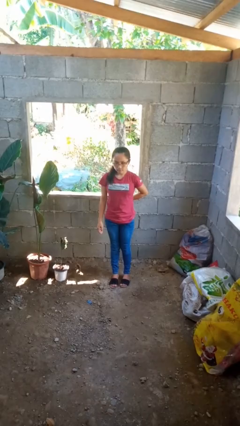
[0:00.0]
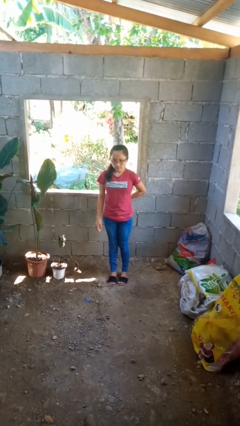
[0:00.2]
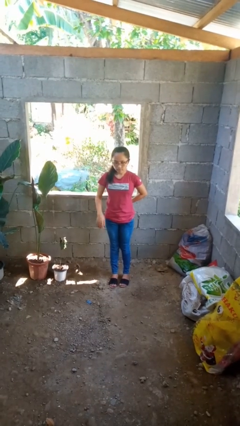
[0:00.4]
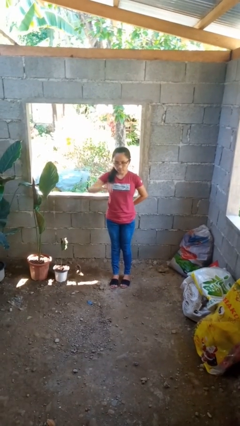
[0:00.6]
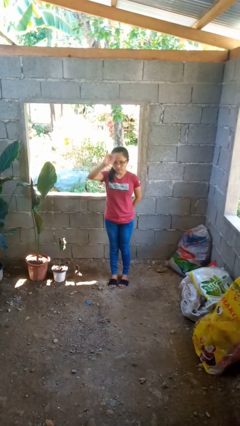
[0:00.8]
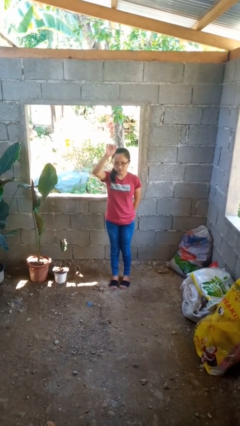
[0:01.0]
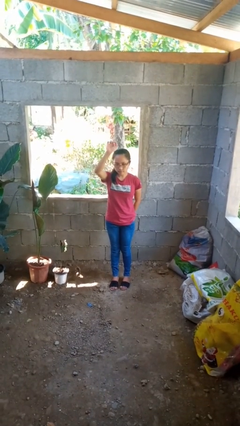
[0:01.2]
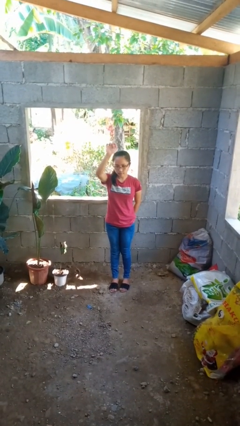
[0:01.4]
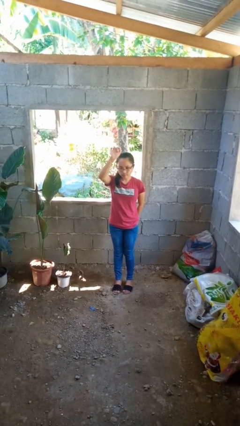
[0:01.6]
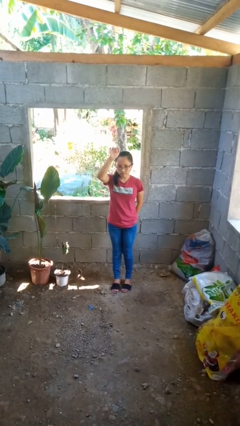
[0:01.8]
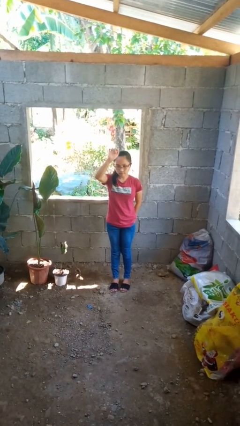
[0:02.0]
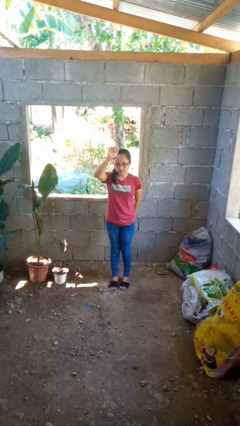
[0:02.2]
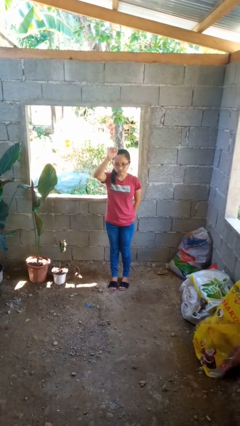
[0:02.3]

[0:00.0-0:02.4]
person gestures raise hand

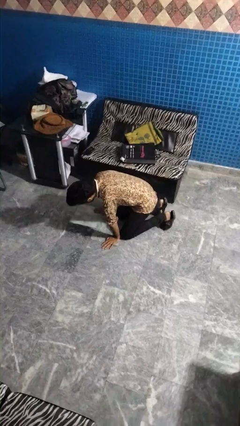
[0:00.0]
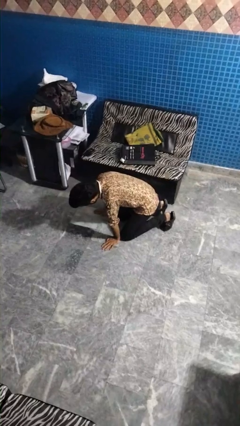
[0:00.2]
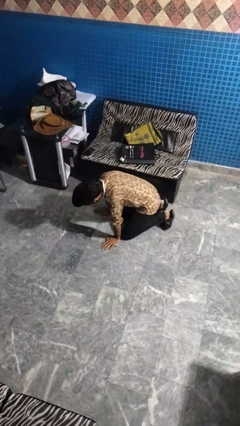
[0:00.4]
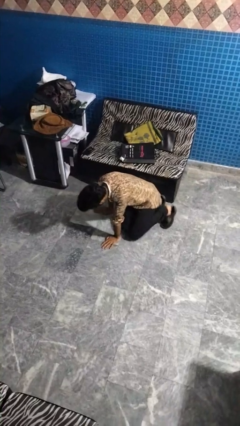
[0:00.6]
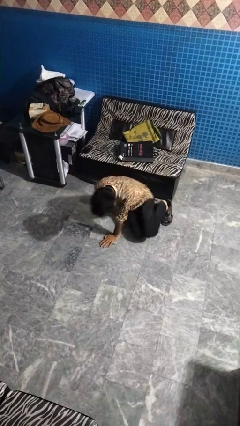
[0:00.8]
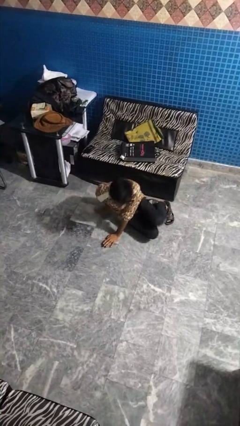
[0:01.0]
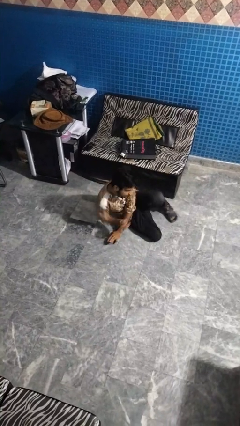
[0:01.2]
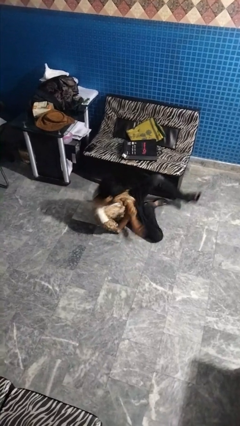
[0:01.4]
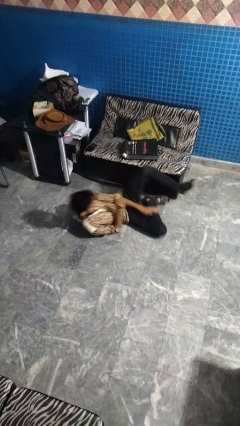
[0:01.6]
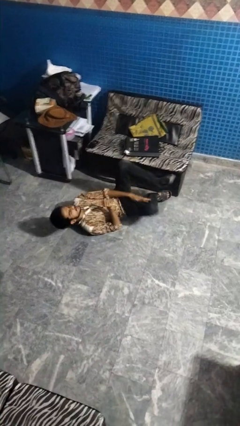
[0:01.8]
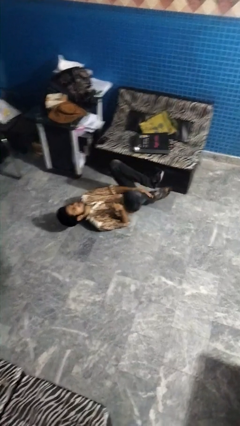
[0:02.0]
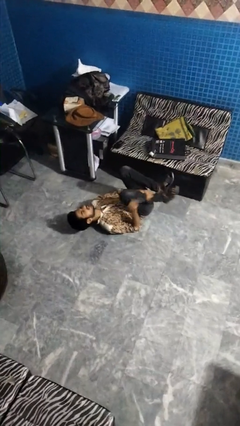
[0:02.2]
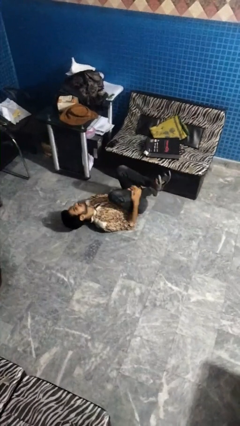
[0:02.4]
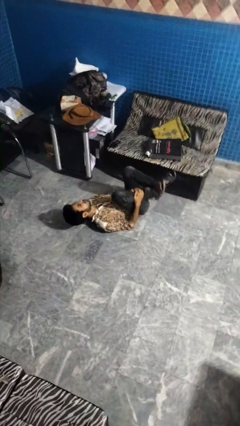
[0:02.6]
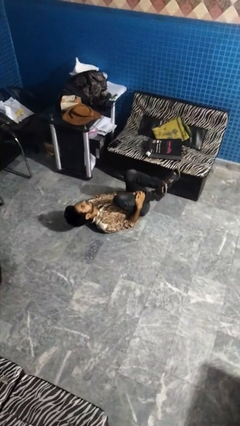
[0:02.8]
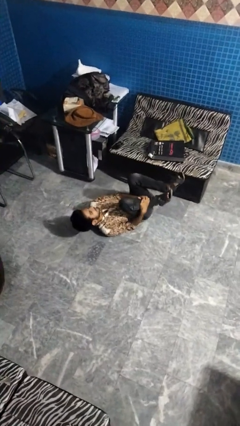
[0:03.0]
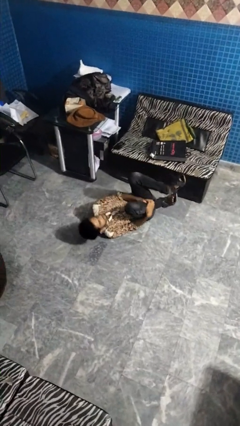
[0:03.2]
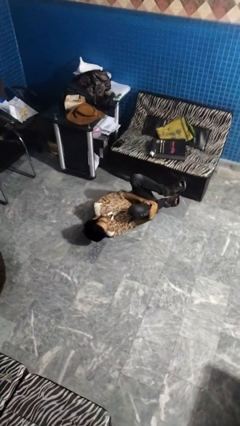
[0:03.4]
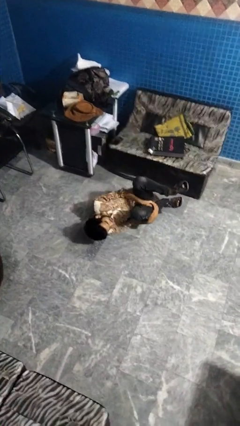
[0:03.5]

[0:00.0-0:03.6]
person lies down on floor

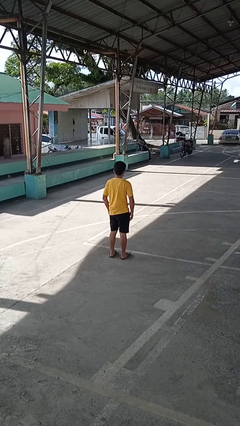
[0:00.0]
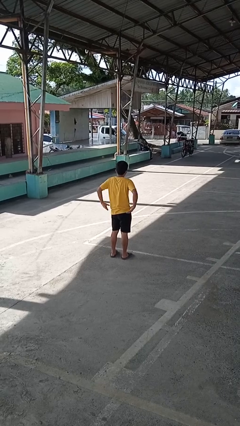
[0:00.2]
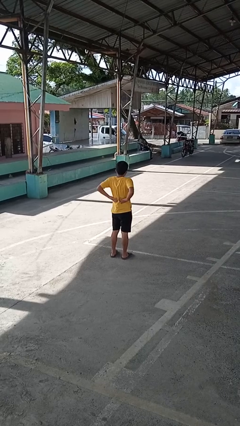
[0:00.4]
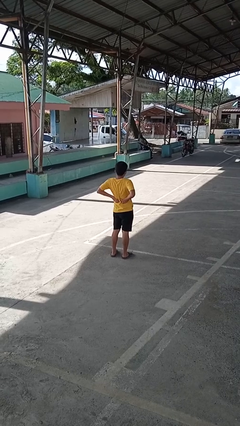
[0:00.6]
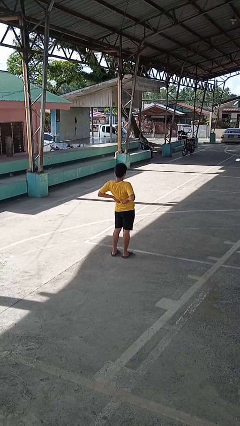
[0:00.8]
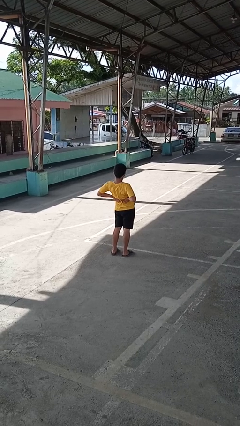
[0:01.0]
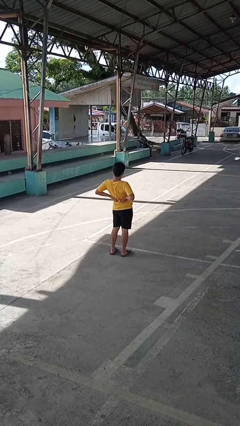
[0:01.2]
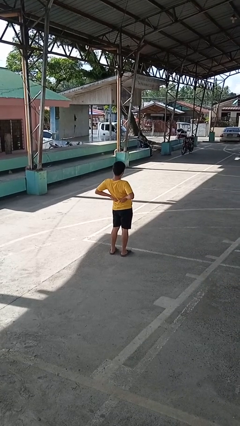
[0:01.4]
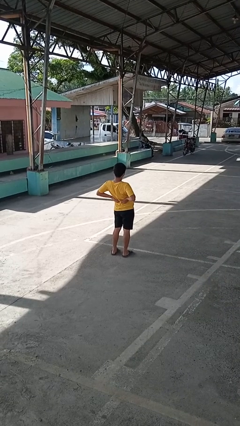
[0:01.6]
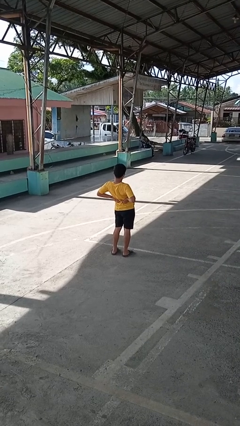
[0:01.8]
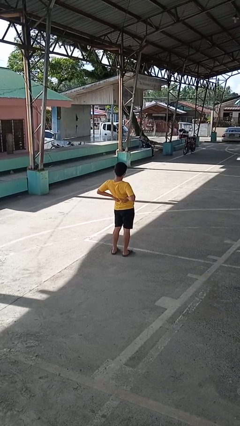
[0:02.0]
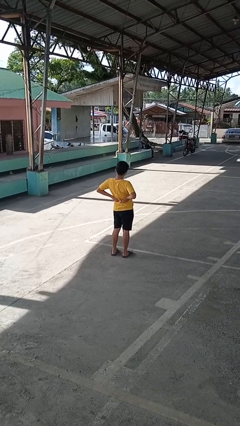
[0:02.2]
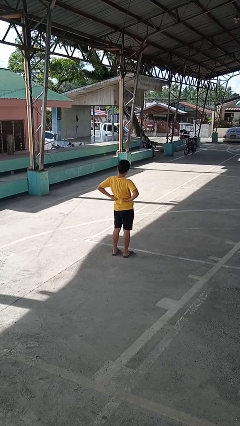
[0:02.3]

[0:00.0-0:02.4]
person stretches back

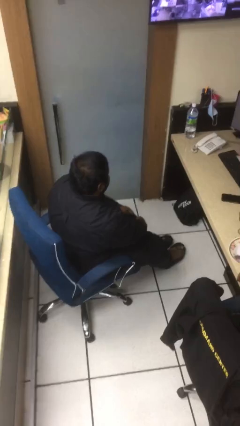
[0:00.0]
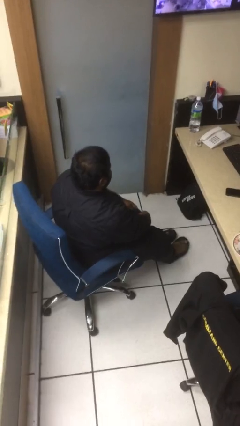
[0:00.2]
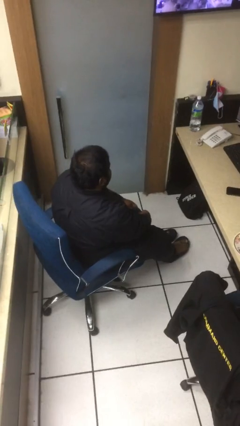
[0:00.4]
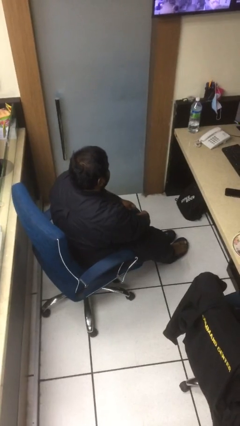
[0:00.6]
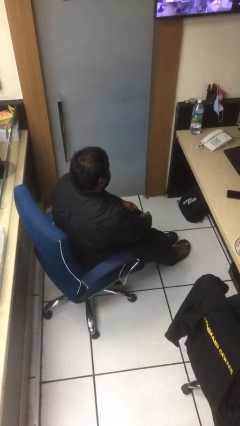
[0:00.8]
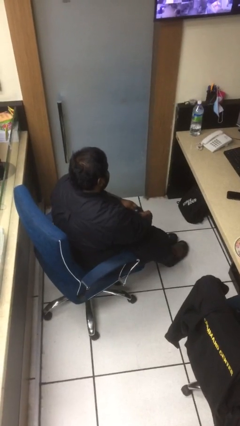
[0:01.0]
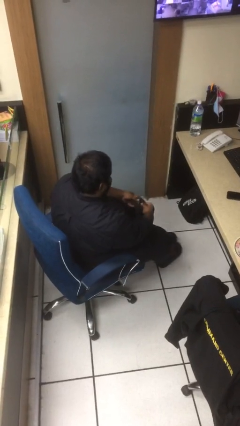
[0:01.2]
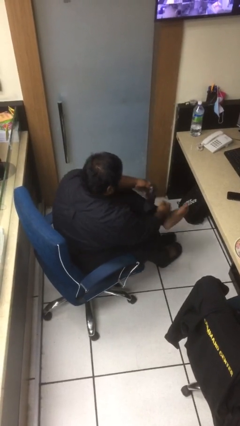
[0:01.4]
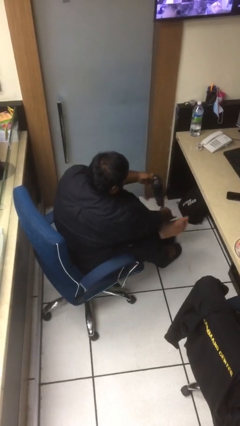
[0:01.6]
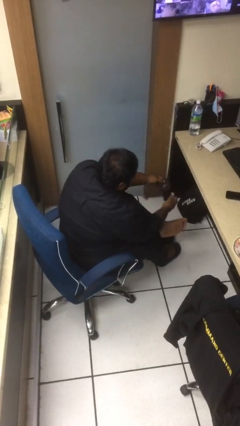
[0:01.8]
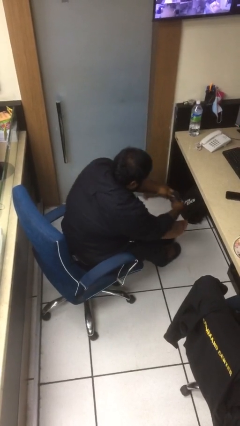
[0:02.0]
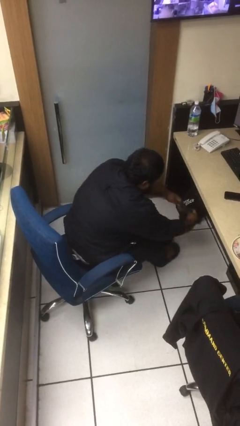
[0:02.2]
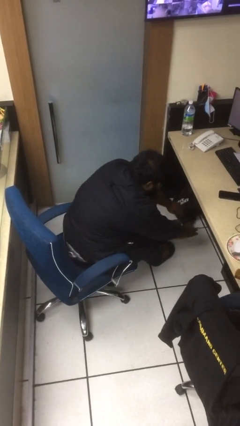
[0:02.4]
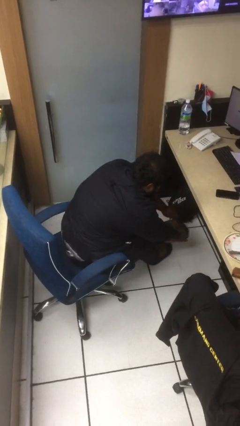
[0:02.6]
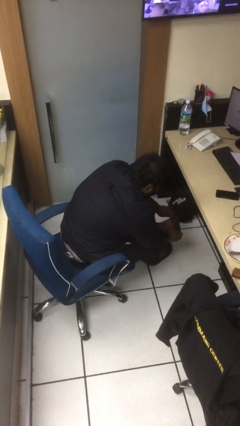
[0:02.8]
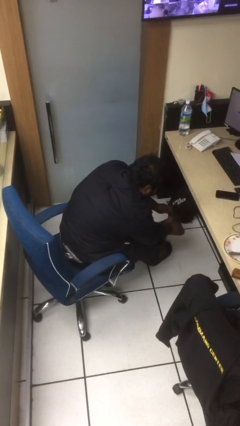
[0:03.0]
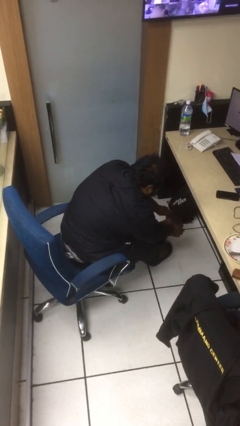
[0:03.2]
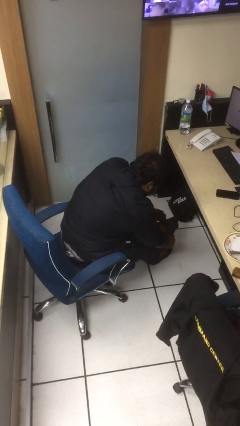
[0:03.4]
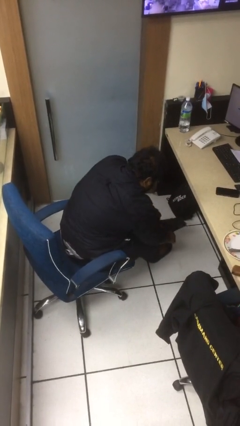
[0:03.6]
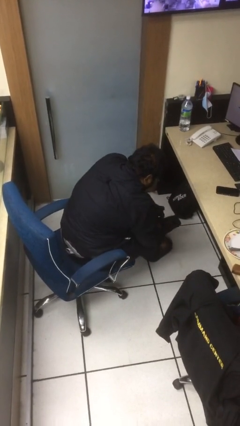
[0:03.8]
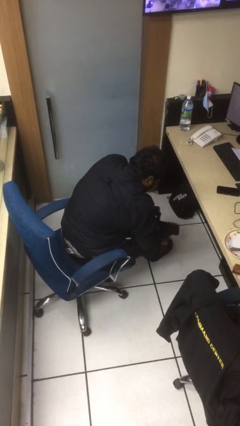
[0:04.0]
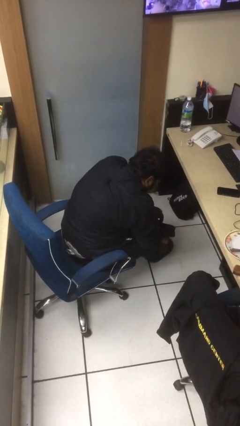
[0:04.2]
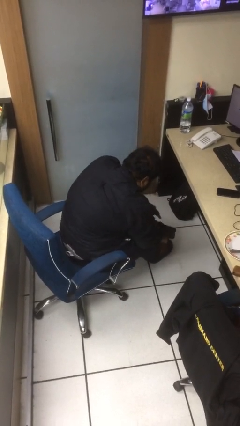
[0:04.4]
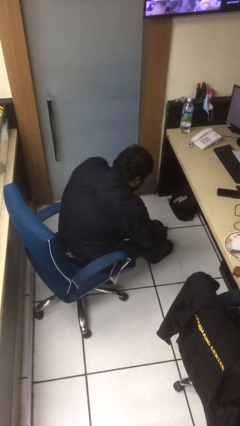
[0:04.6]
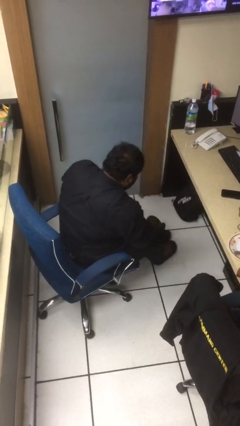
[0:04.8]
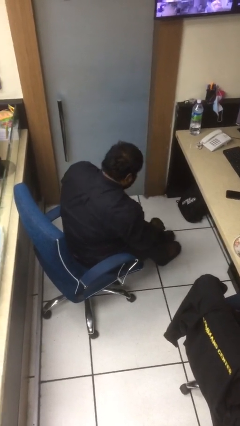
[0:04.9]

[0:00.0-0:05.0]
person puts on socks

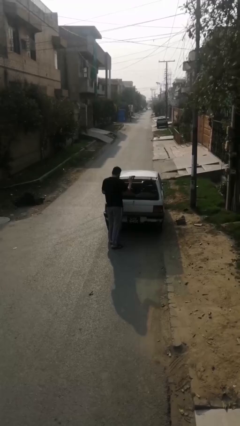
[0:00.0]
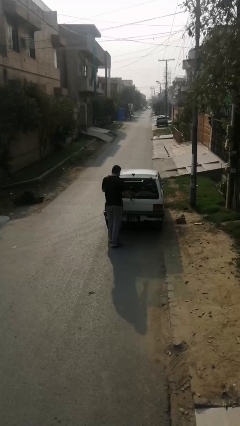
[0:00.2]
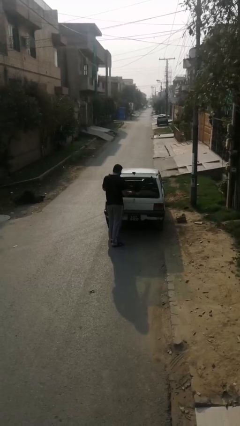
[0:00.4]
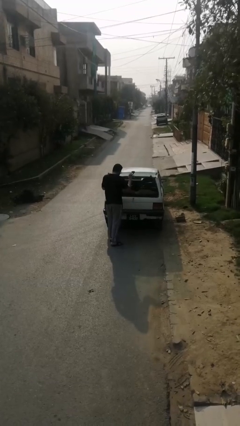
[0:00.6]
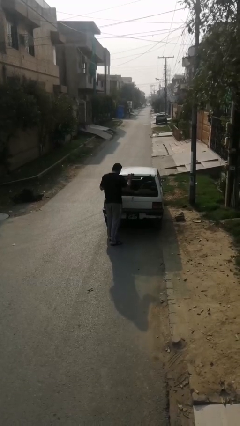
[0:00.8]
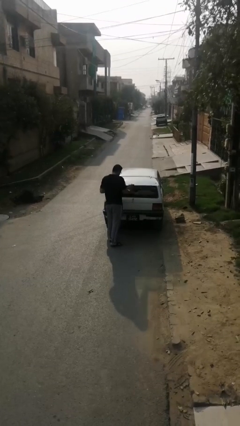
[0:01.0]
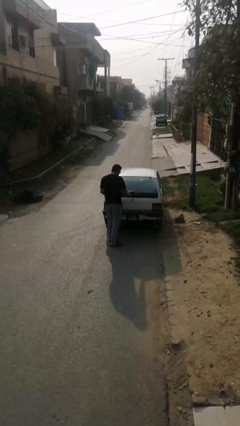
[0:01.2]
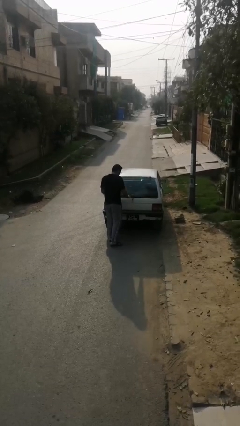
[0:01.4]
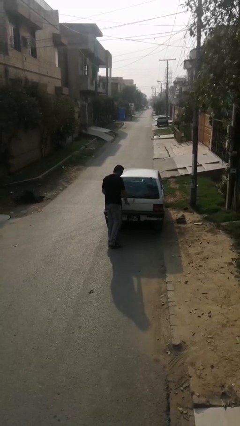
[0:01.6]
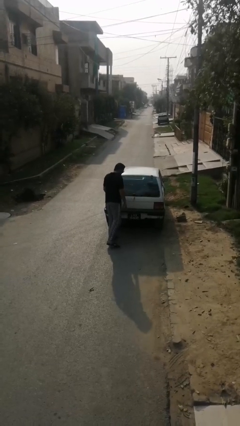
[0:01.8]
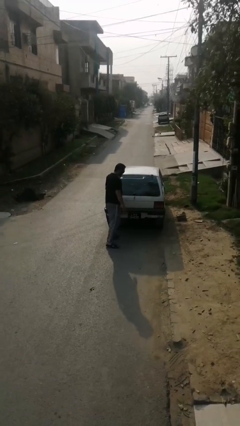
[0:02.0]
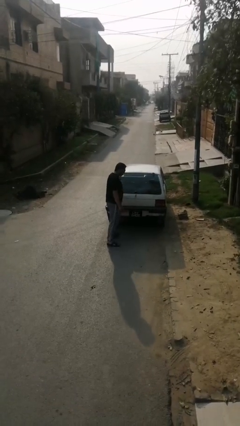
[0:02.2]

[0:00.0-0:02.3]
person closes car trunk

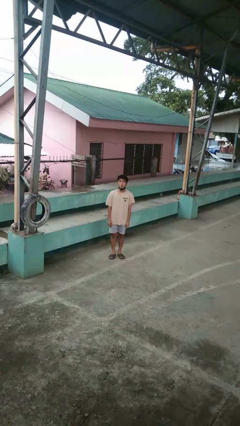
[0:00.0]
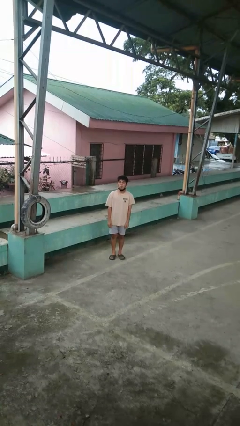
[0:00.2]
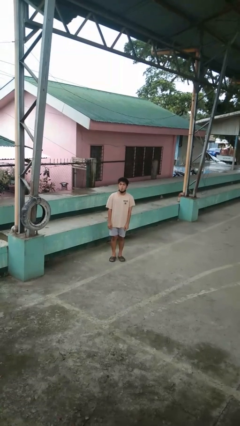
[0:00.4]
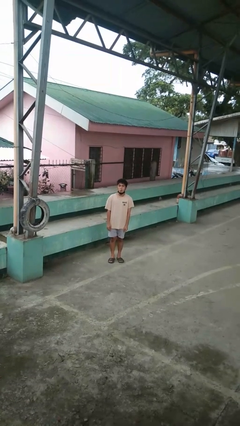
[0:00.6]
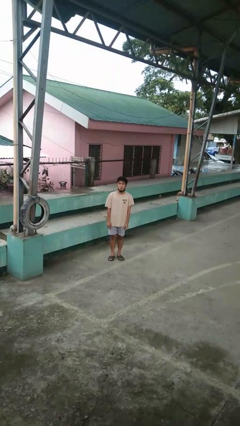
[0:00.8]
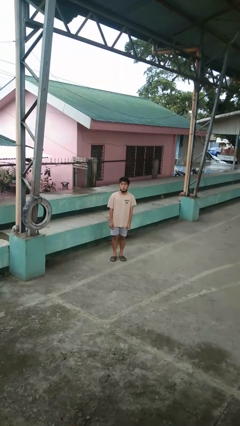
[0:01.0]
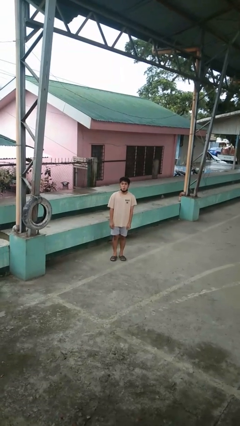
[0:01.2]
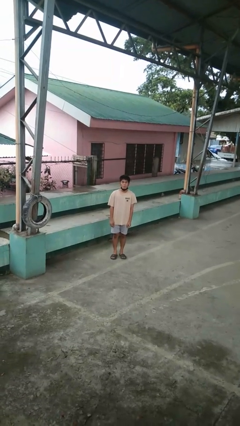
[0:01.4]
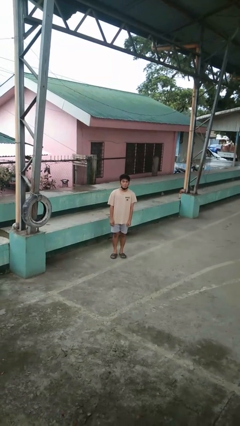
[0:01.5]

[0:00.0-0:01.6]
person sticks out tongue
